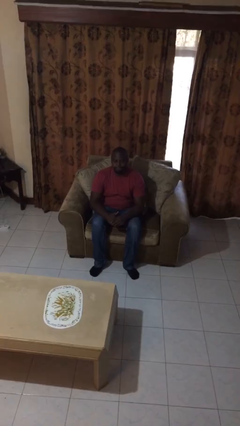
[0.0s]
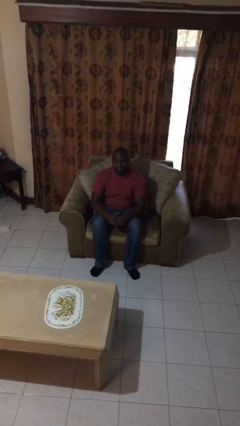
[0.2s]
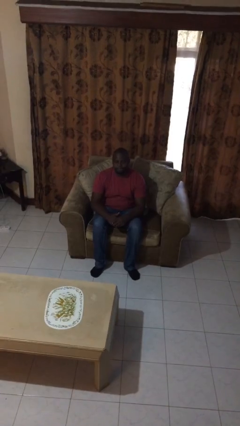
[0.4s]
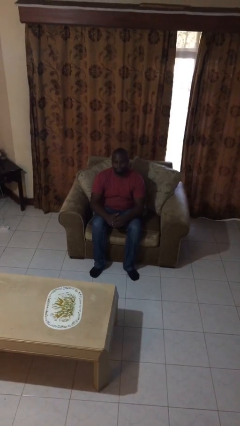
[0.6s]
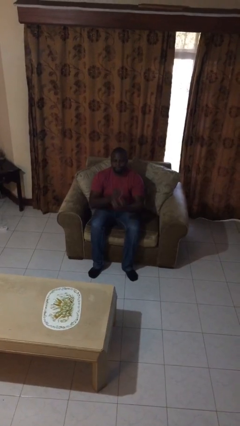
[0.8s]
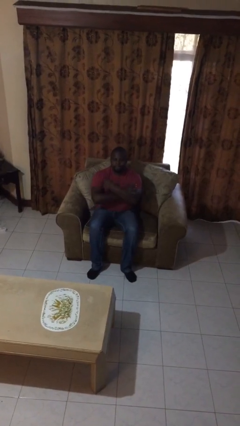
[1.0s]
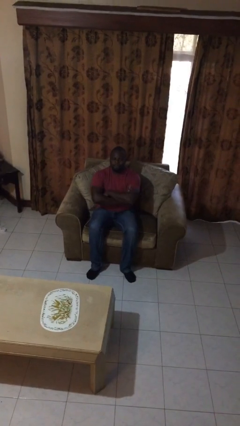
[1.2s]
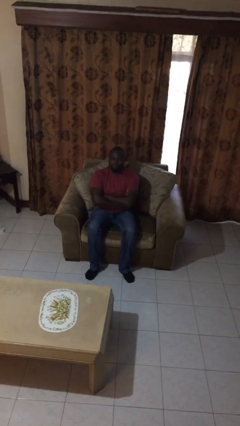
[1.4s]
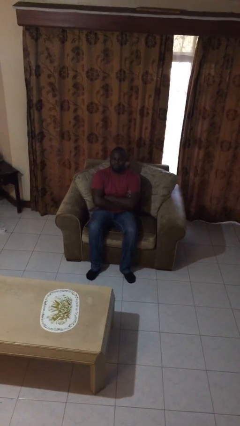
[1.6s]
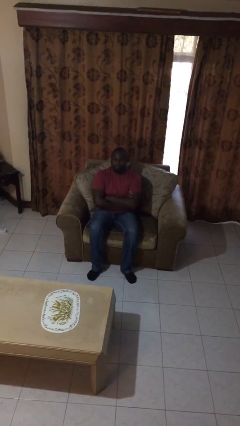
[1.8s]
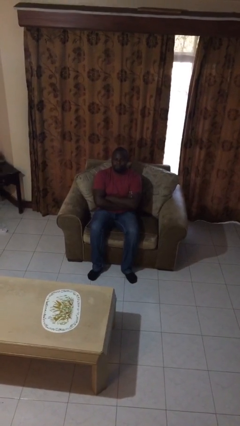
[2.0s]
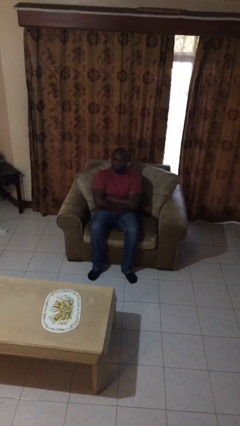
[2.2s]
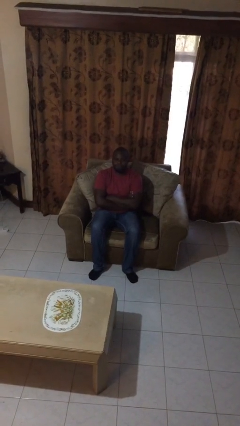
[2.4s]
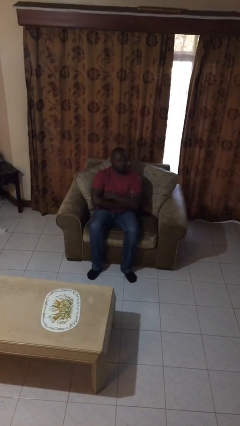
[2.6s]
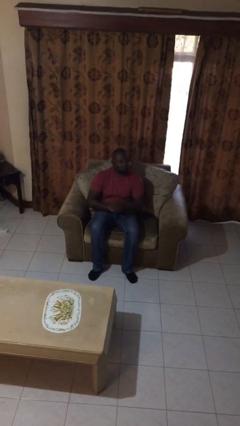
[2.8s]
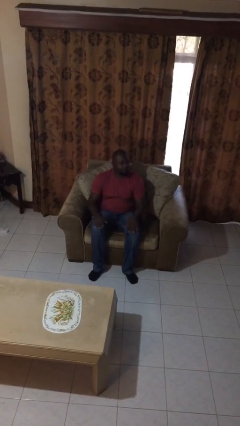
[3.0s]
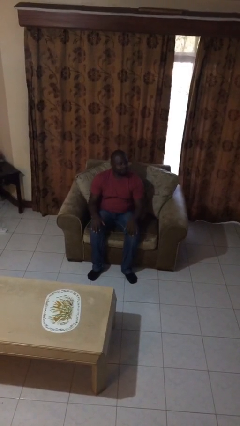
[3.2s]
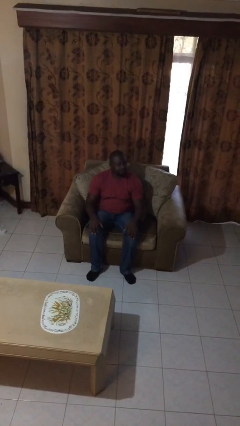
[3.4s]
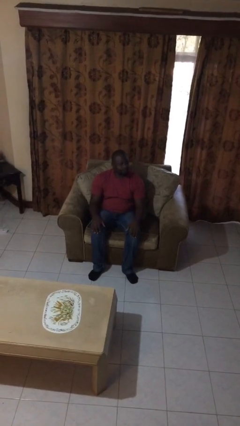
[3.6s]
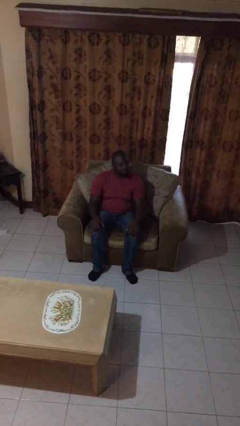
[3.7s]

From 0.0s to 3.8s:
person crosses arms

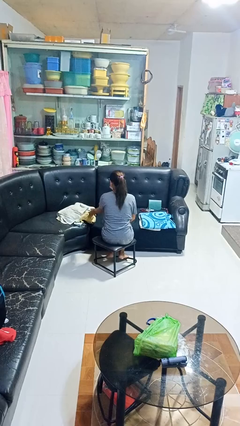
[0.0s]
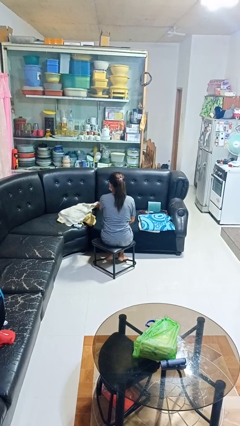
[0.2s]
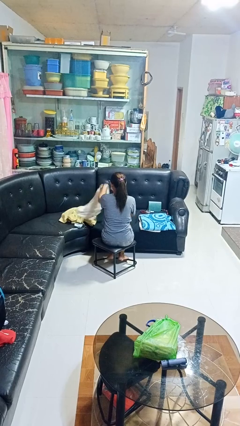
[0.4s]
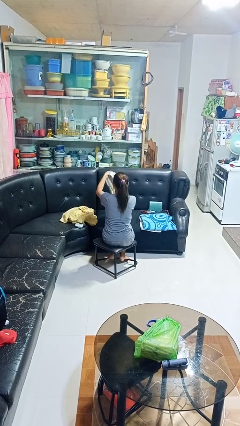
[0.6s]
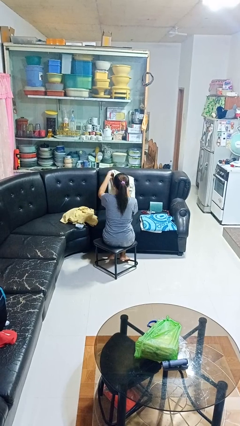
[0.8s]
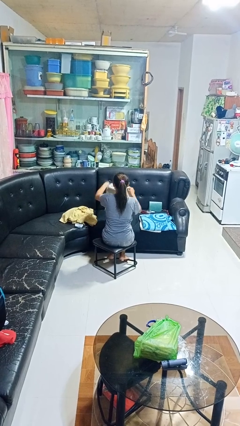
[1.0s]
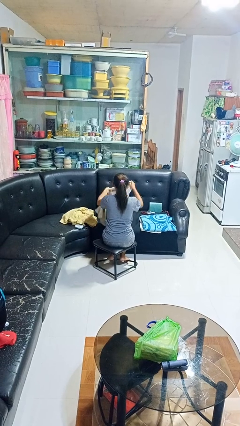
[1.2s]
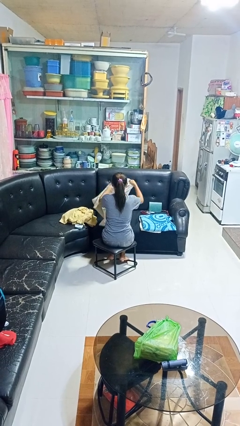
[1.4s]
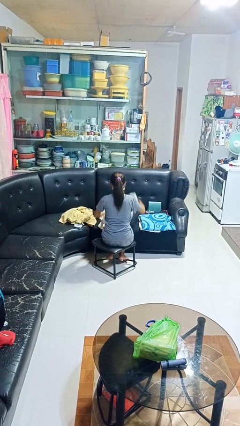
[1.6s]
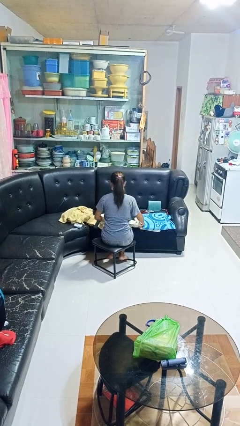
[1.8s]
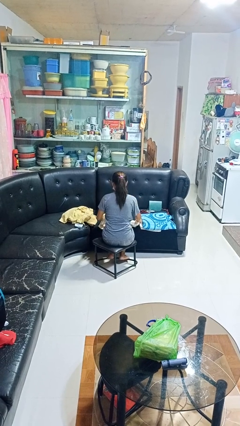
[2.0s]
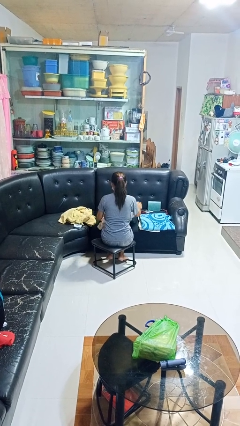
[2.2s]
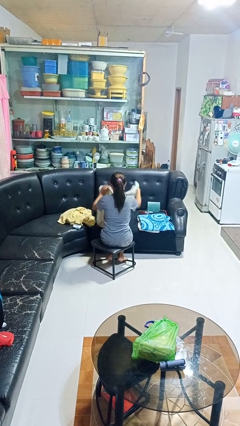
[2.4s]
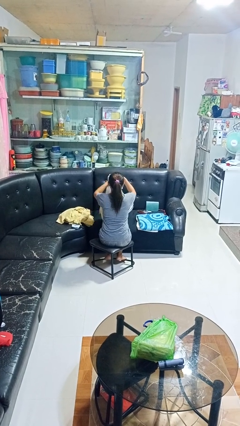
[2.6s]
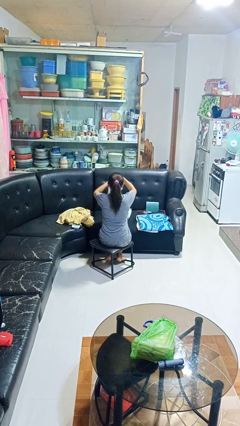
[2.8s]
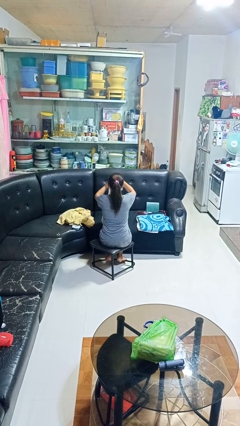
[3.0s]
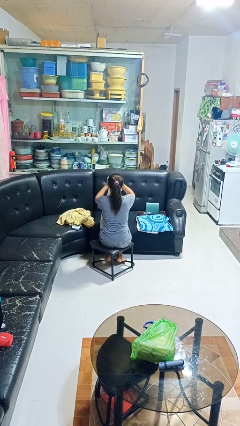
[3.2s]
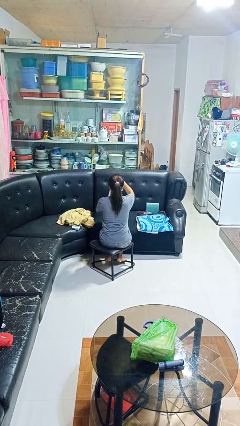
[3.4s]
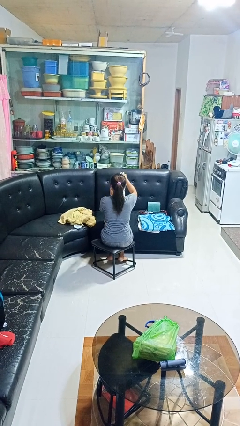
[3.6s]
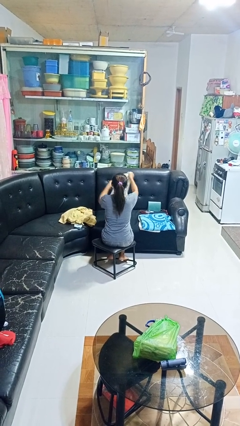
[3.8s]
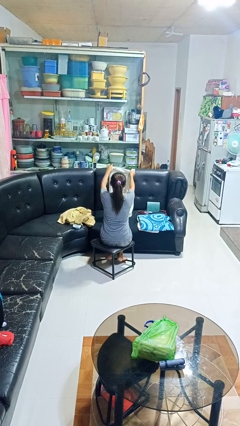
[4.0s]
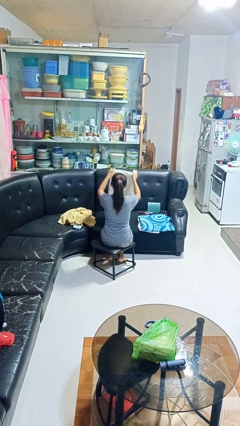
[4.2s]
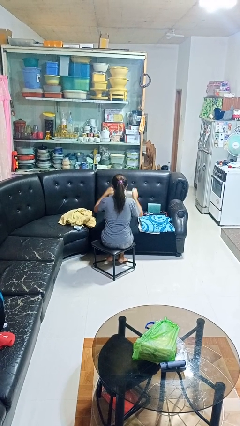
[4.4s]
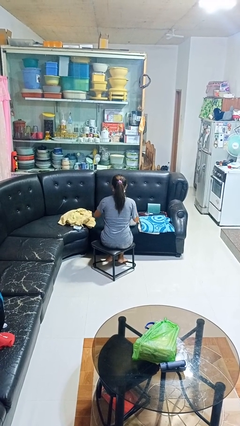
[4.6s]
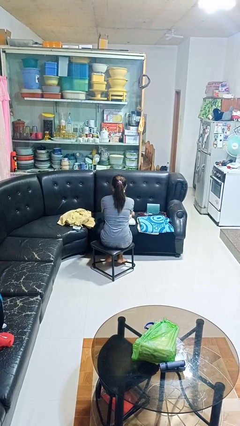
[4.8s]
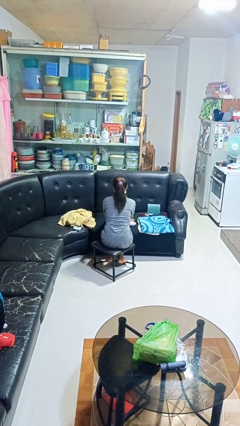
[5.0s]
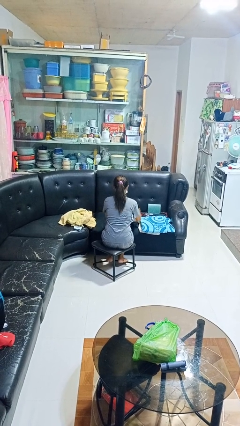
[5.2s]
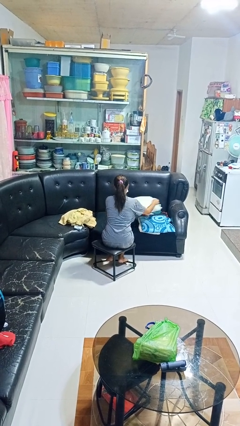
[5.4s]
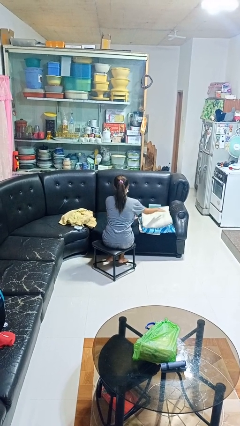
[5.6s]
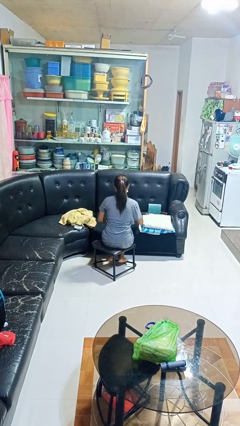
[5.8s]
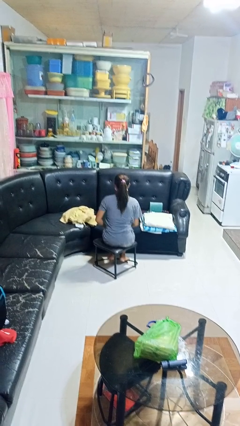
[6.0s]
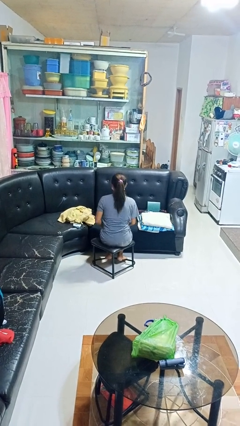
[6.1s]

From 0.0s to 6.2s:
person folds towel

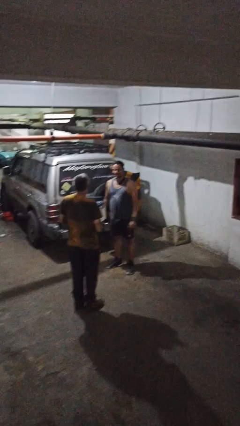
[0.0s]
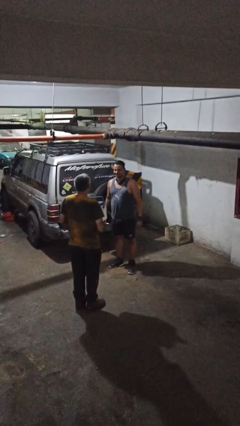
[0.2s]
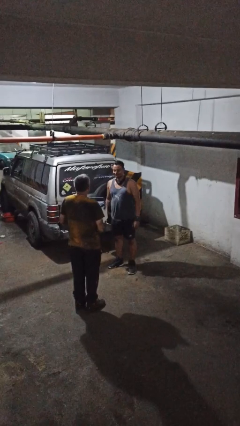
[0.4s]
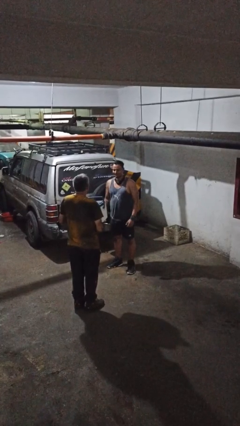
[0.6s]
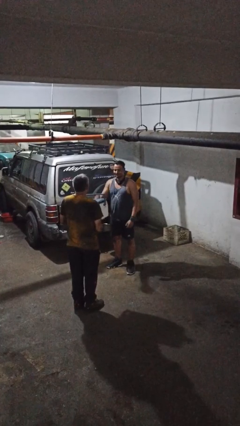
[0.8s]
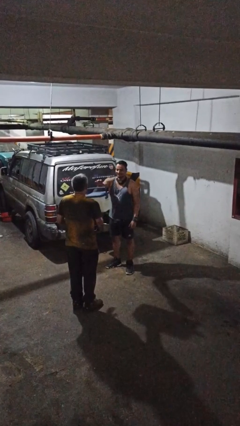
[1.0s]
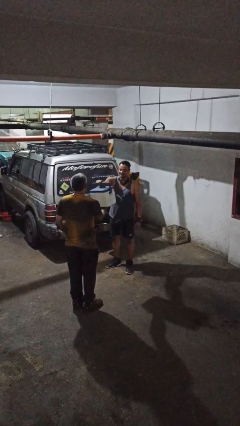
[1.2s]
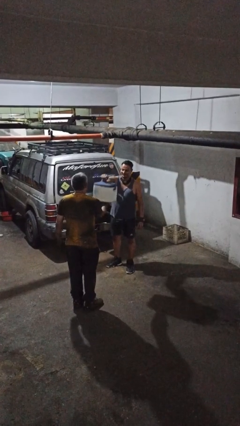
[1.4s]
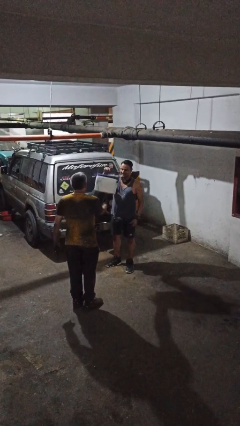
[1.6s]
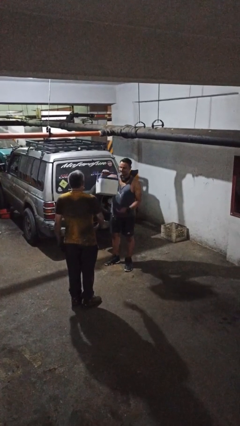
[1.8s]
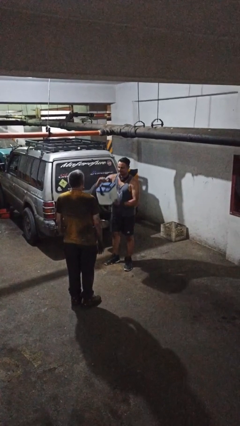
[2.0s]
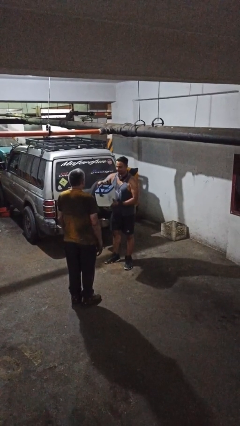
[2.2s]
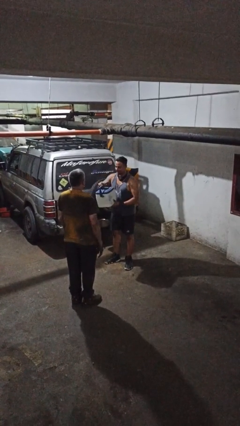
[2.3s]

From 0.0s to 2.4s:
person transfers object to person

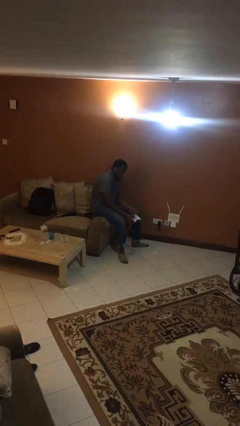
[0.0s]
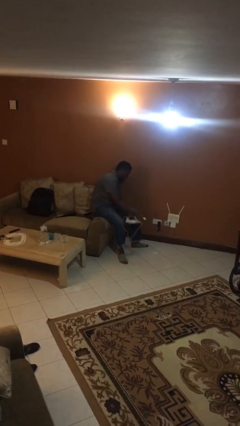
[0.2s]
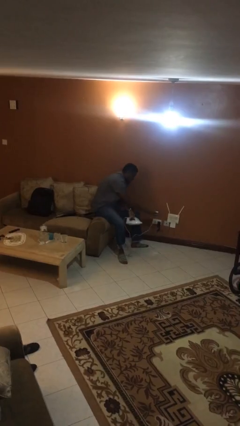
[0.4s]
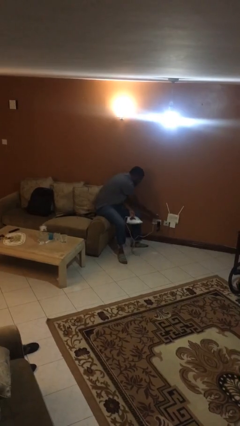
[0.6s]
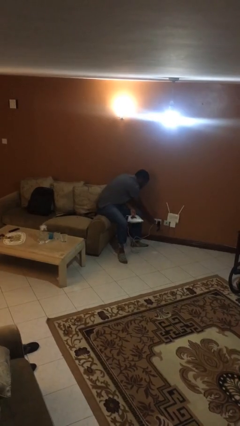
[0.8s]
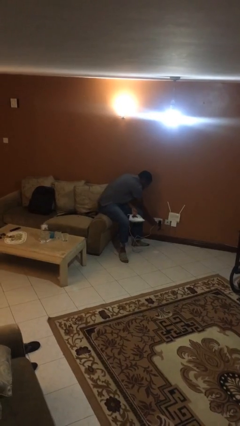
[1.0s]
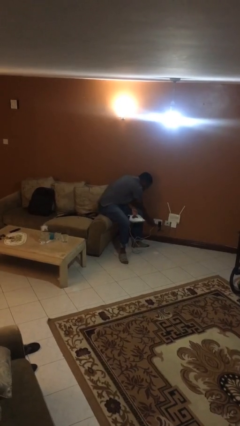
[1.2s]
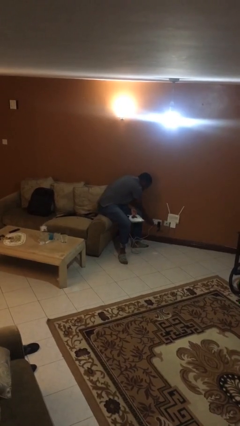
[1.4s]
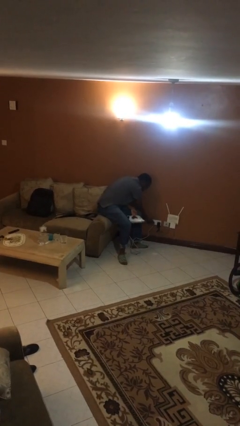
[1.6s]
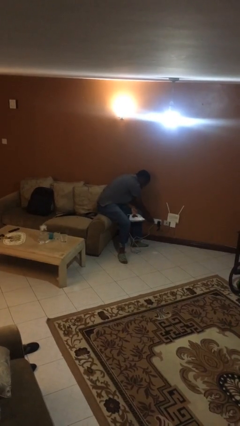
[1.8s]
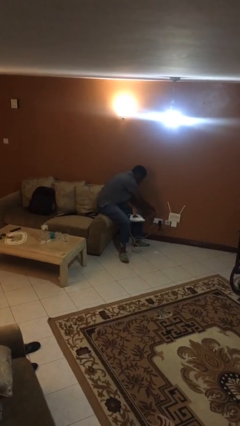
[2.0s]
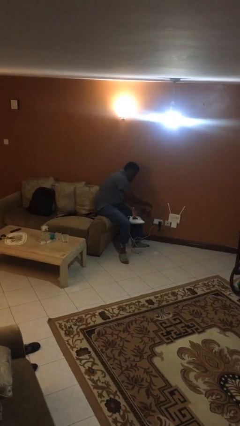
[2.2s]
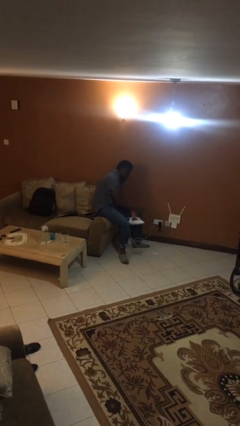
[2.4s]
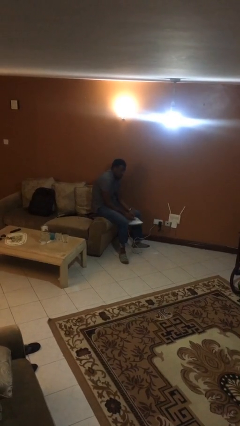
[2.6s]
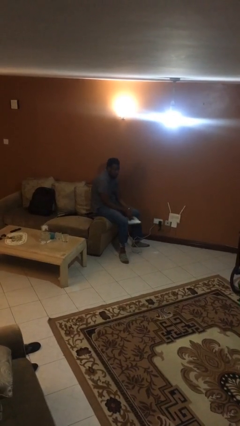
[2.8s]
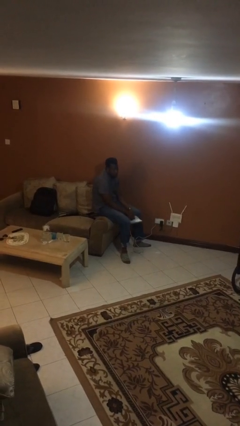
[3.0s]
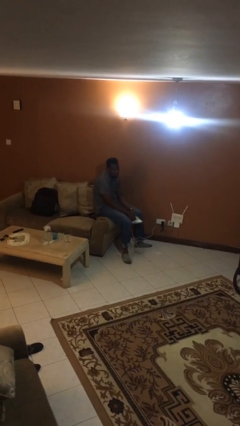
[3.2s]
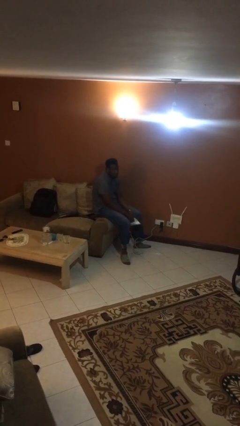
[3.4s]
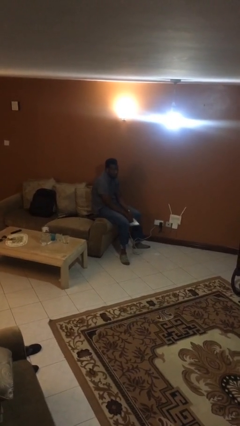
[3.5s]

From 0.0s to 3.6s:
person plugs into electrical socket

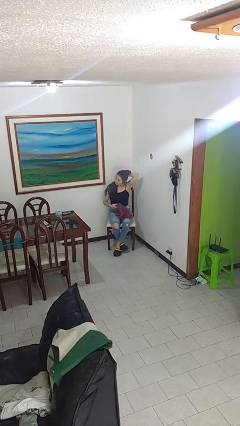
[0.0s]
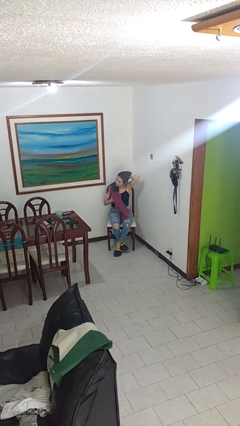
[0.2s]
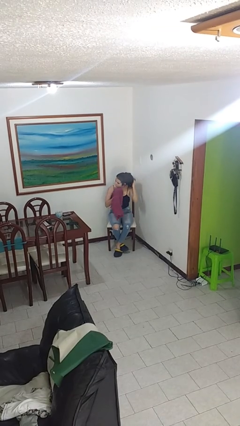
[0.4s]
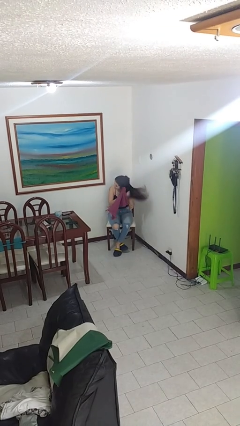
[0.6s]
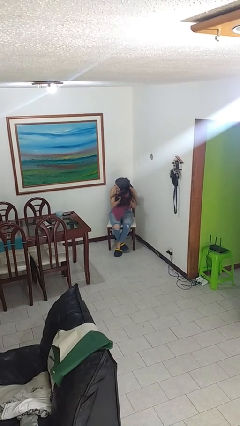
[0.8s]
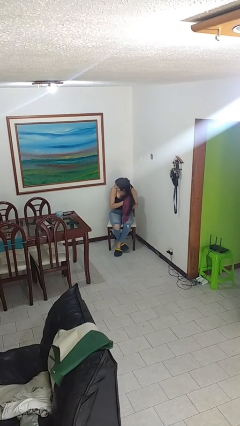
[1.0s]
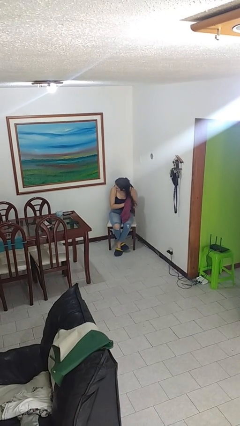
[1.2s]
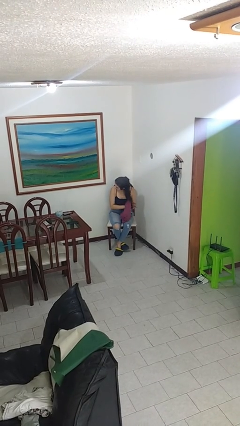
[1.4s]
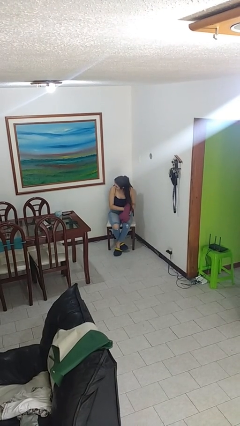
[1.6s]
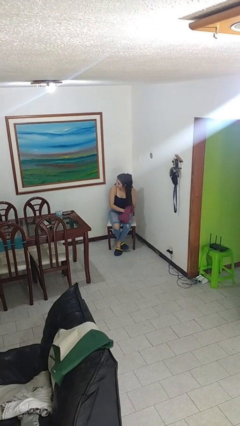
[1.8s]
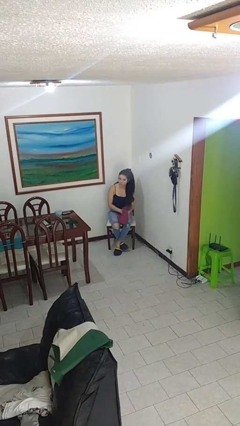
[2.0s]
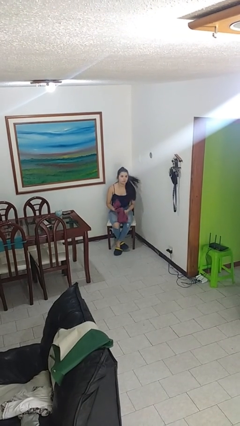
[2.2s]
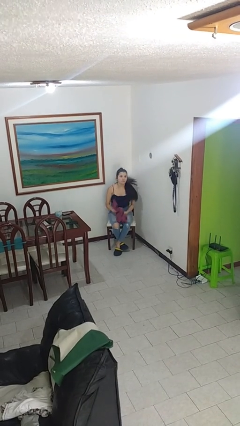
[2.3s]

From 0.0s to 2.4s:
person dries hair with towel
